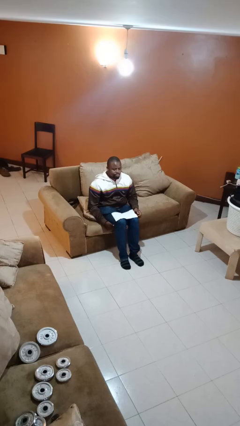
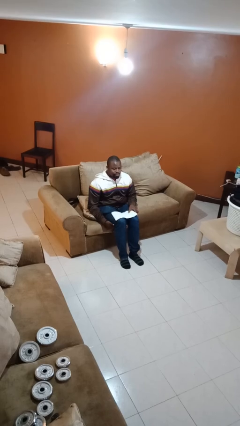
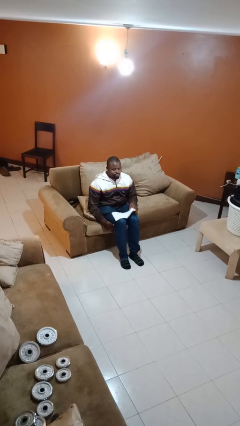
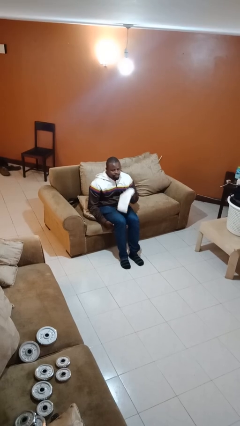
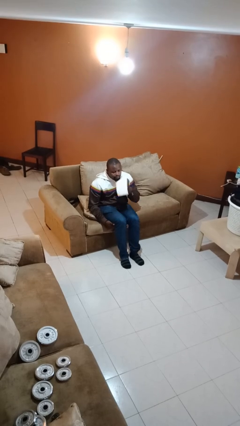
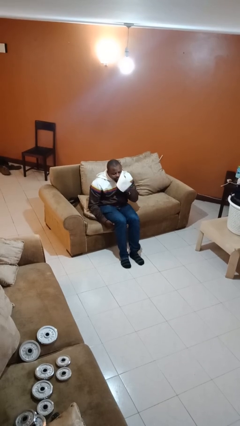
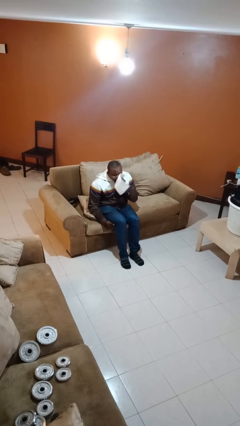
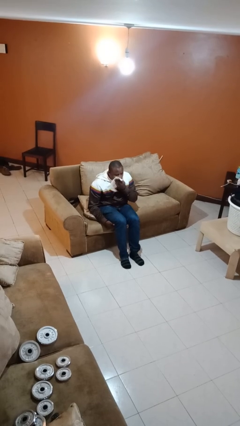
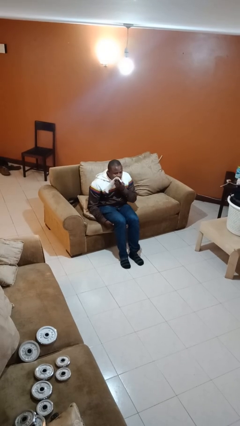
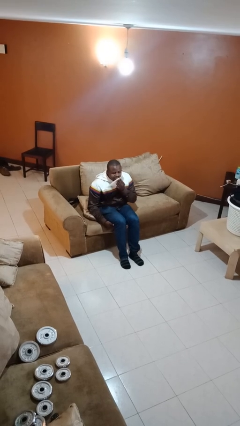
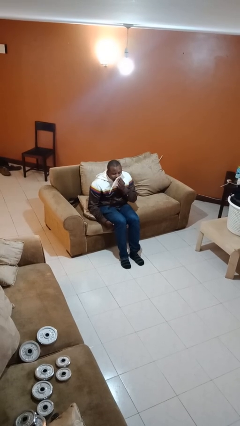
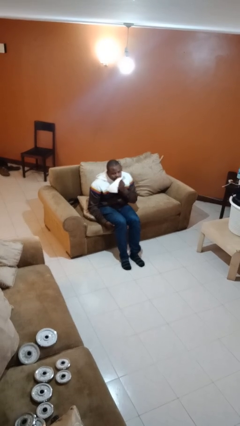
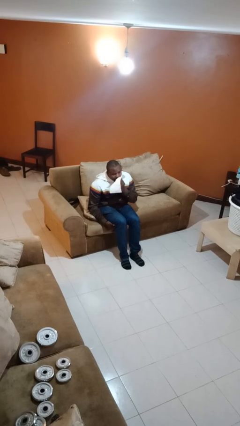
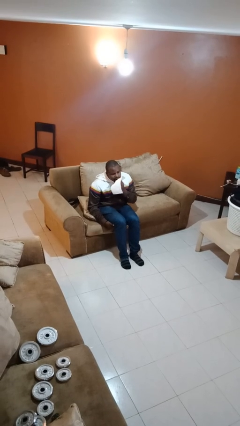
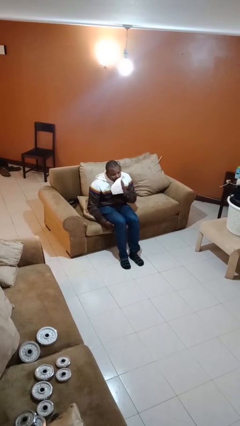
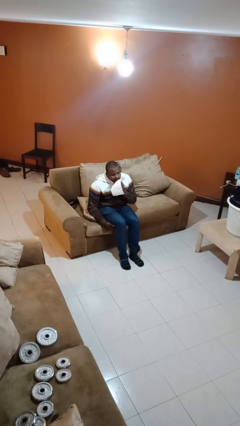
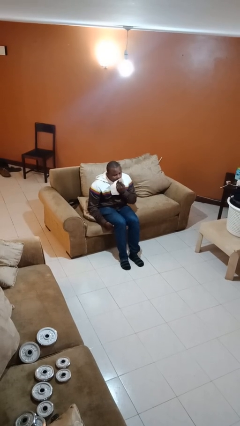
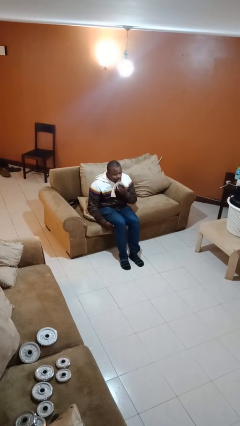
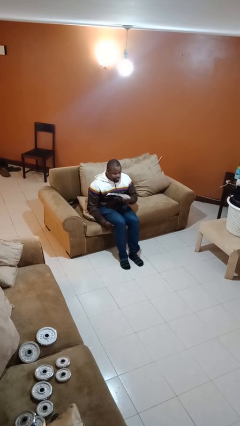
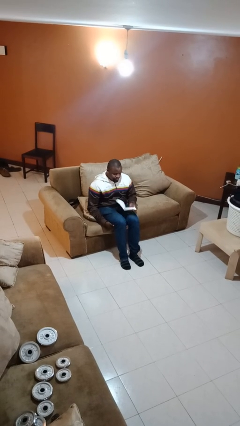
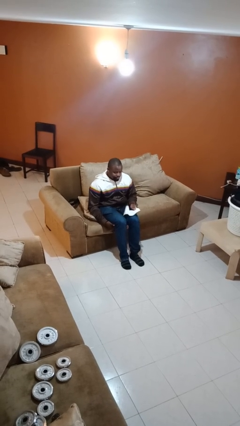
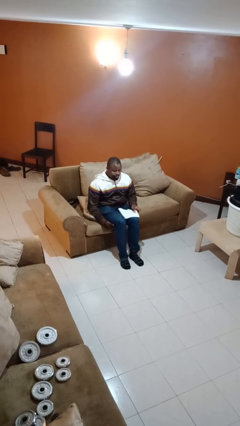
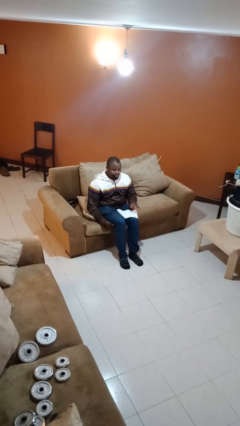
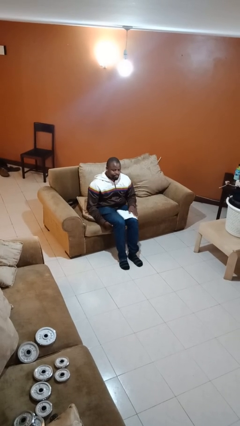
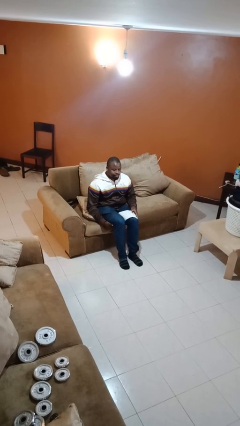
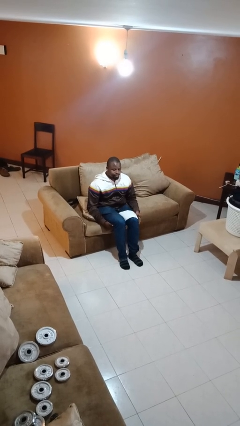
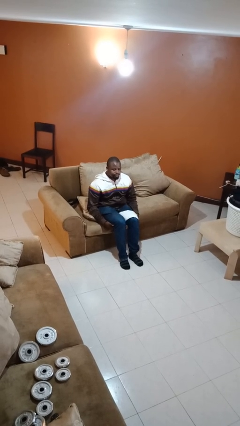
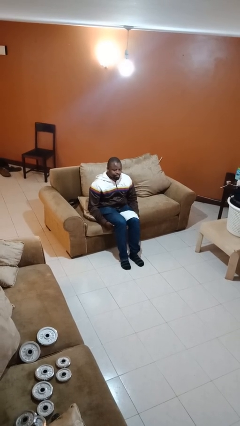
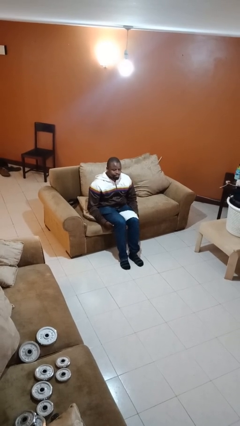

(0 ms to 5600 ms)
person wipes mouth with napkin

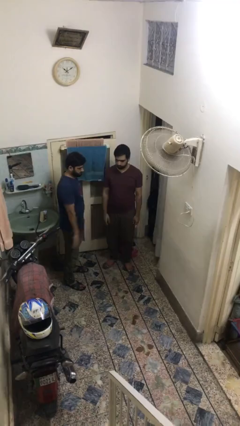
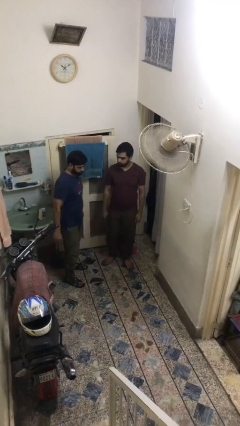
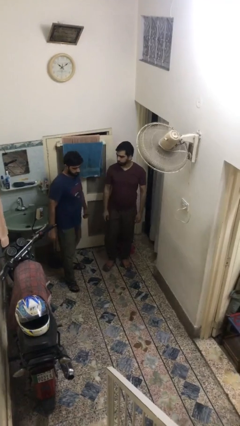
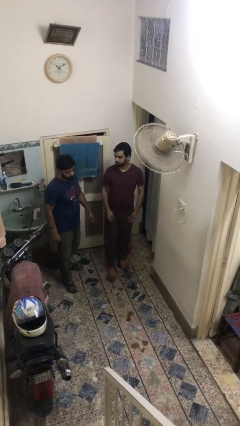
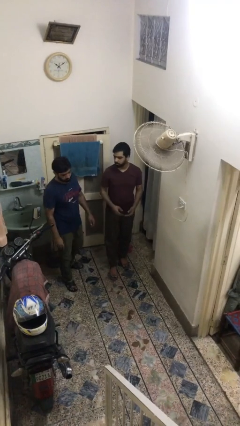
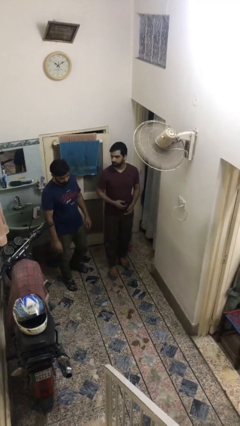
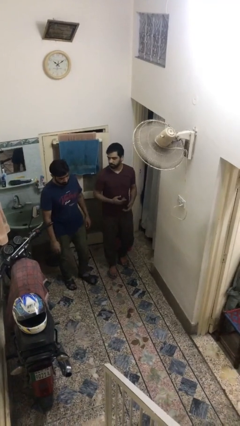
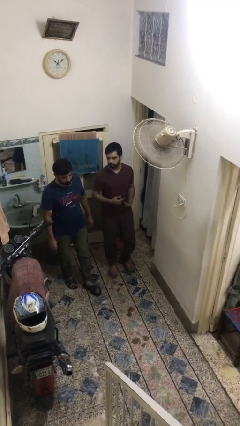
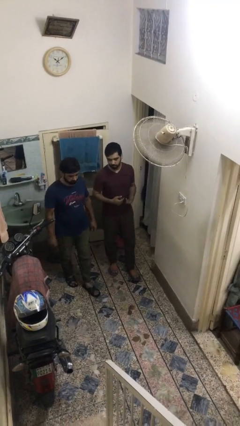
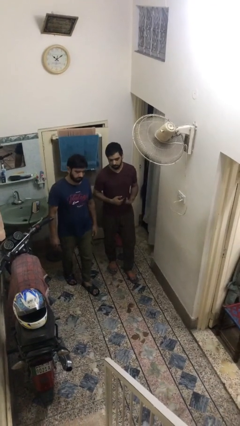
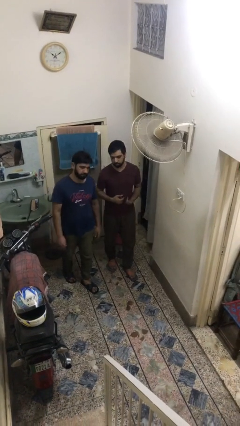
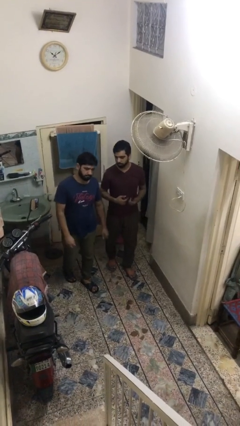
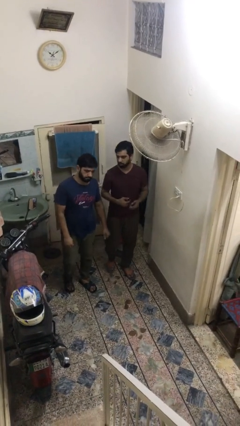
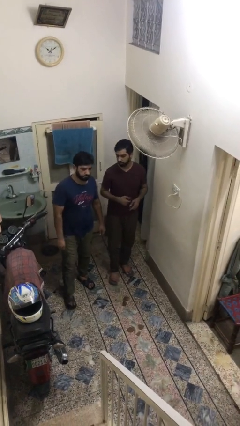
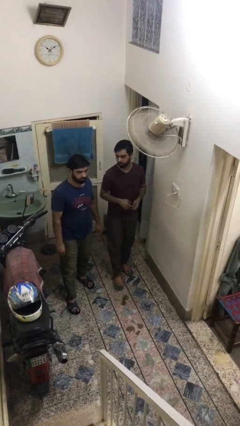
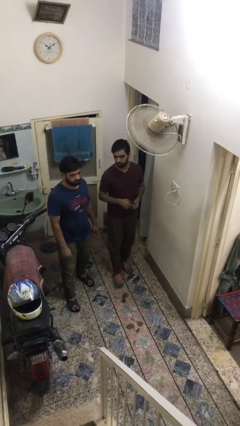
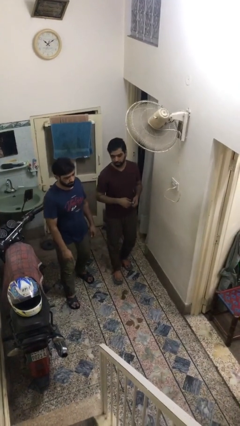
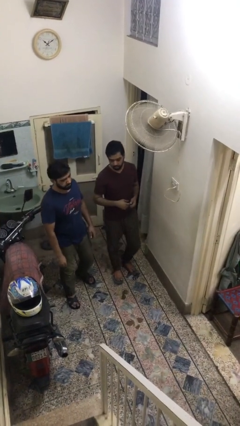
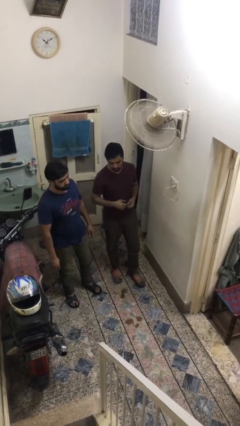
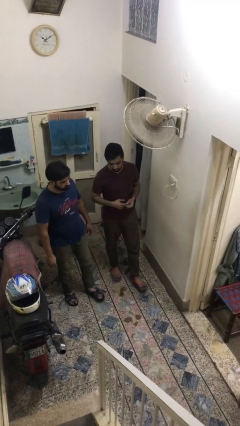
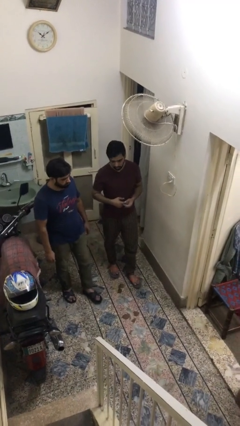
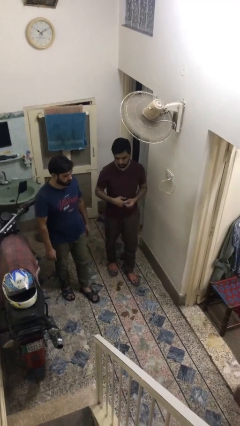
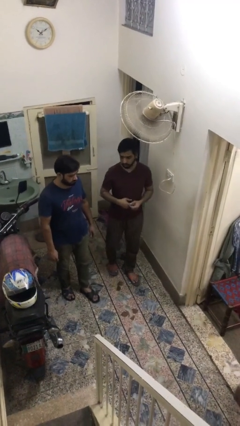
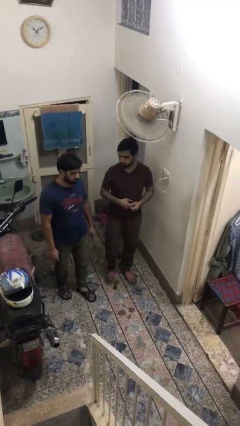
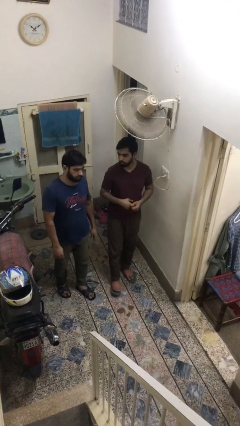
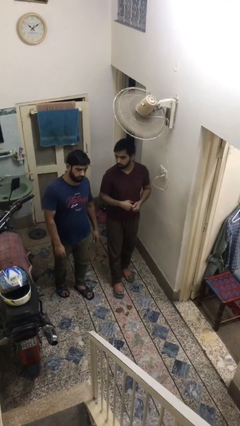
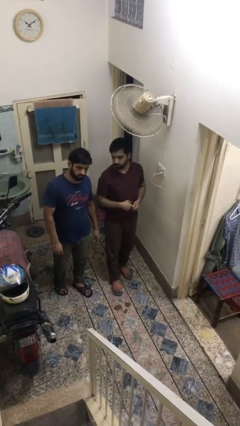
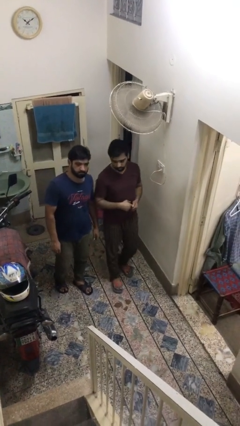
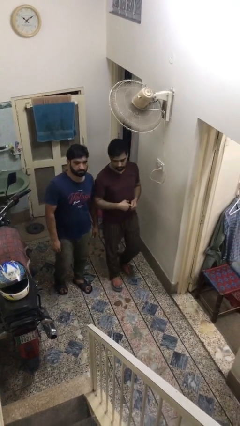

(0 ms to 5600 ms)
person talks to person

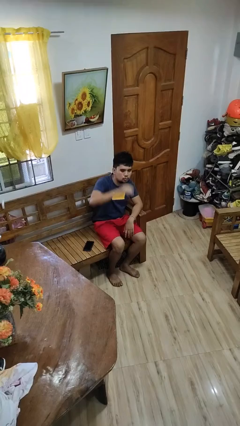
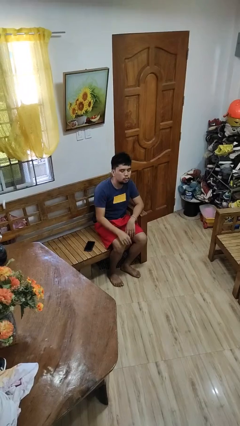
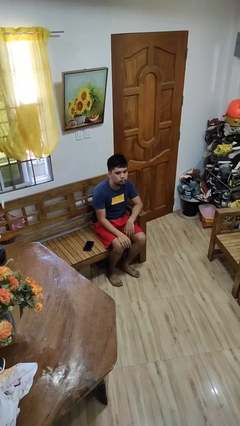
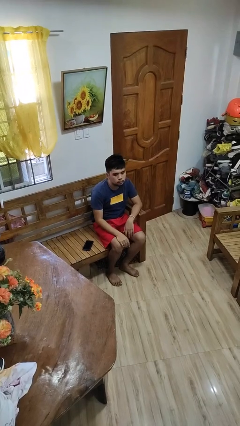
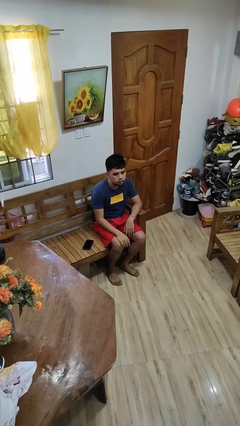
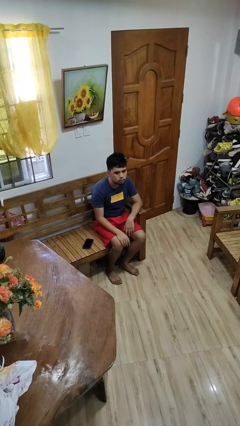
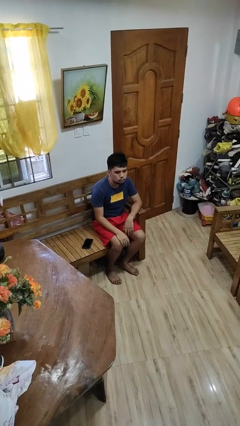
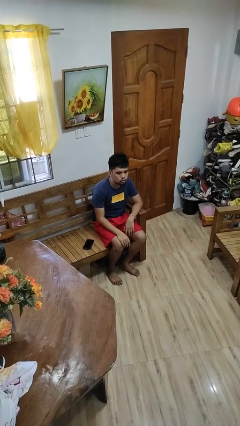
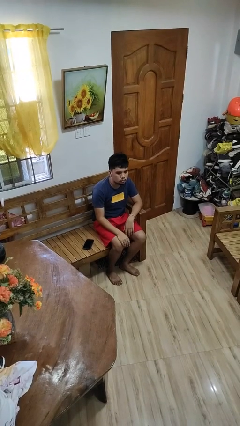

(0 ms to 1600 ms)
person gestures lower hand

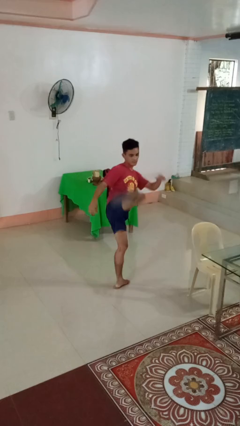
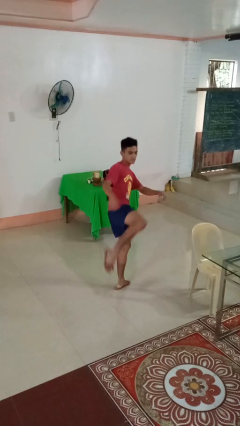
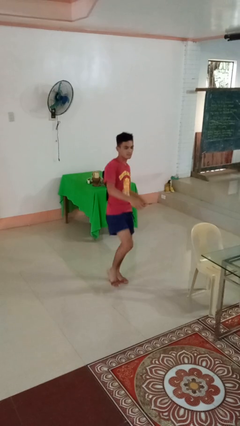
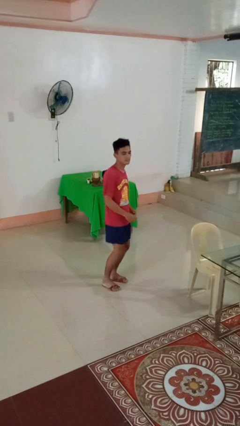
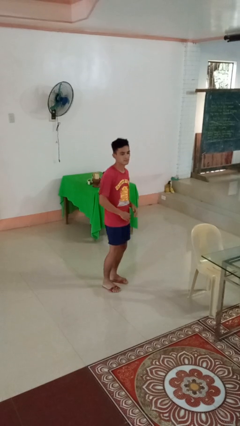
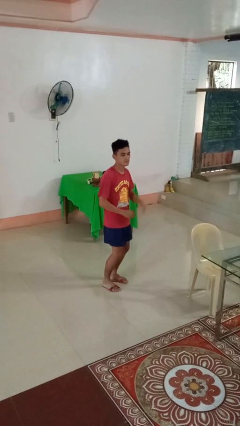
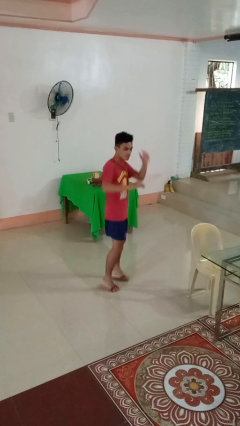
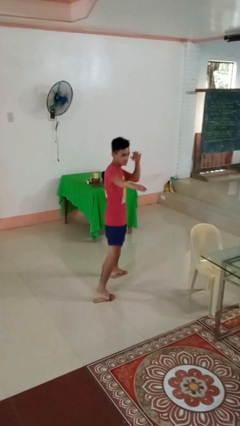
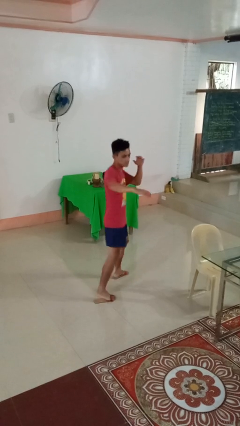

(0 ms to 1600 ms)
person karate kicks

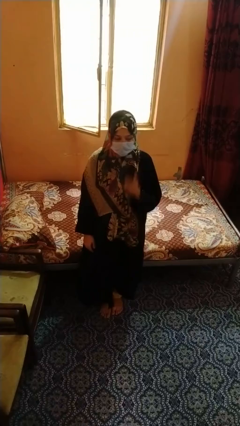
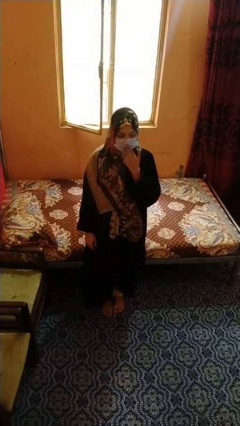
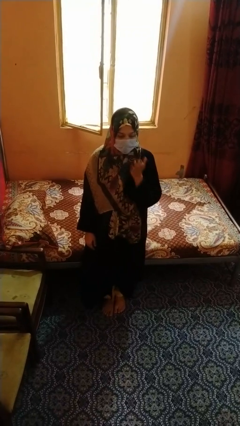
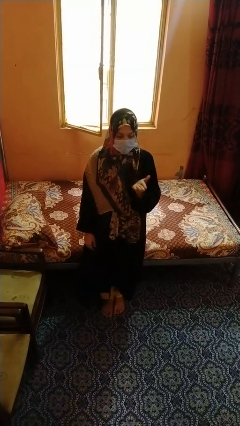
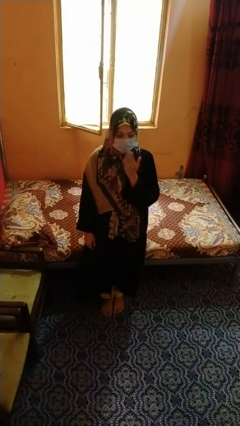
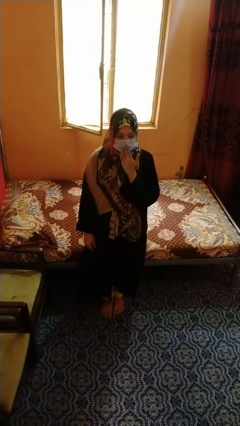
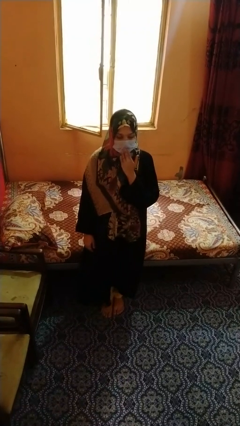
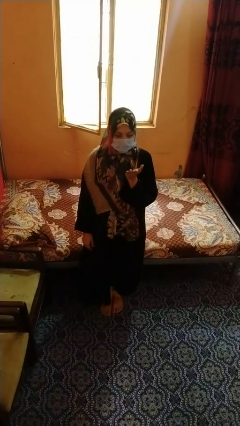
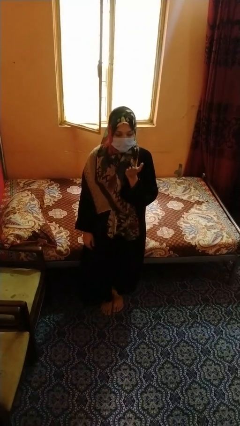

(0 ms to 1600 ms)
person gestures blow kiss

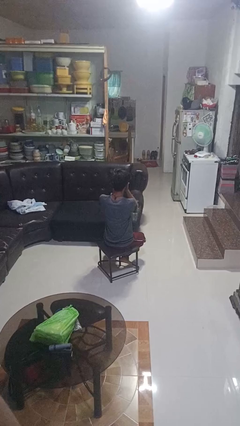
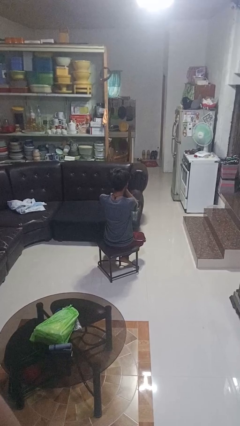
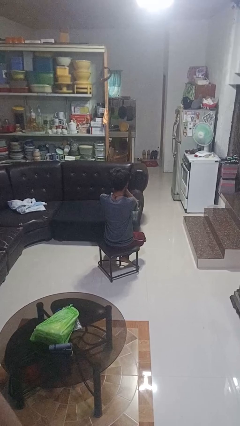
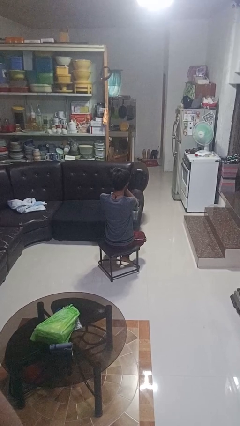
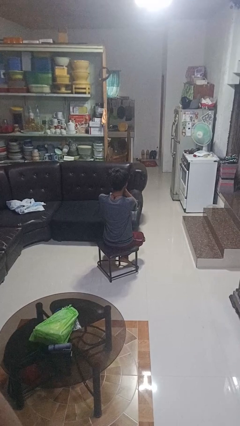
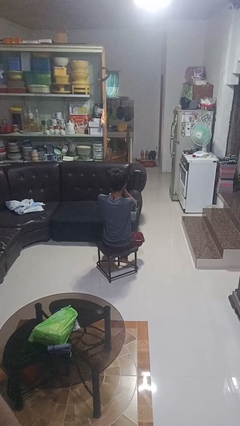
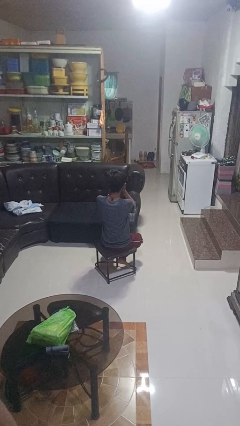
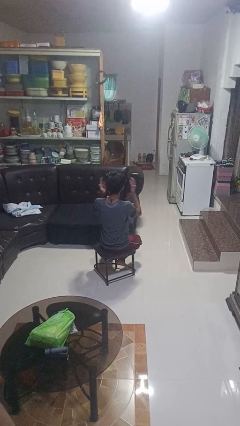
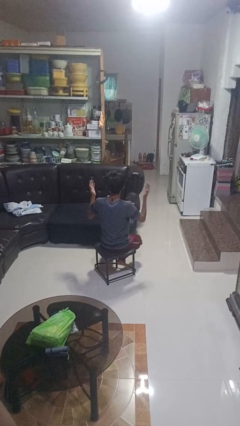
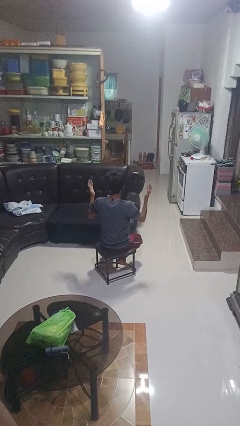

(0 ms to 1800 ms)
person covers face with hands
